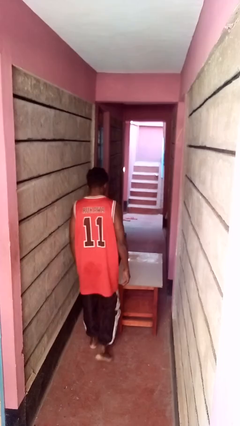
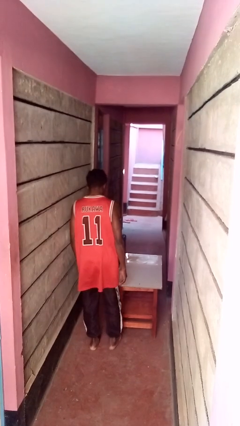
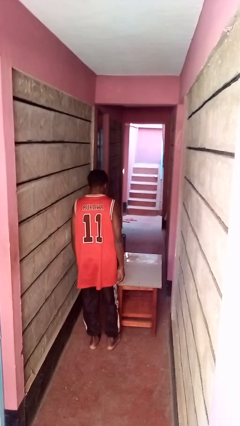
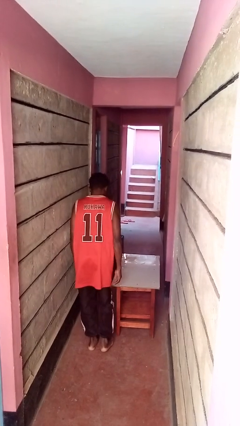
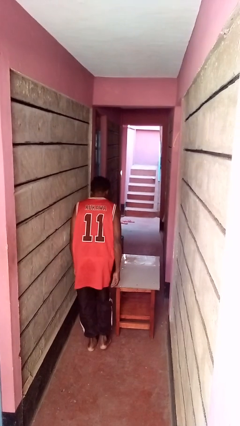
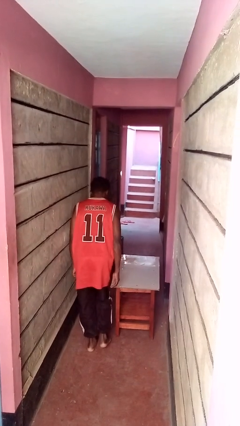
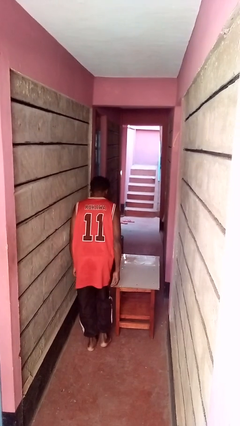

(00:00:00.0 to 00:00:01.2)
person stubs toe

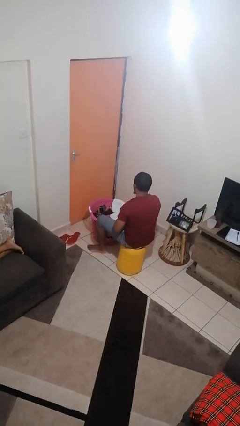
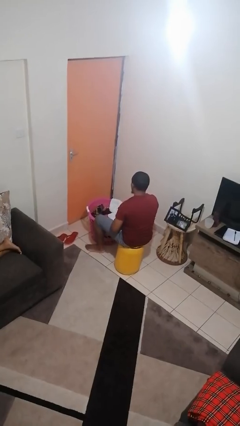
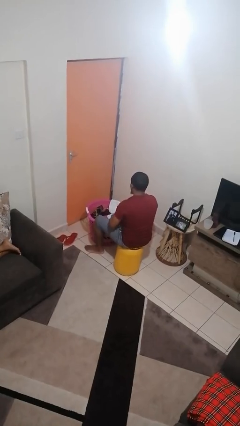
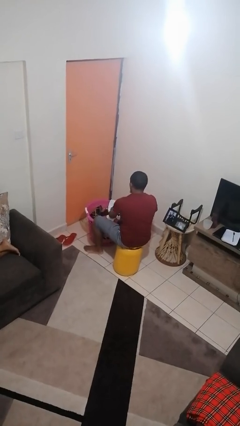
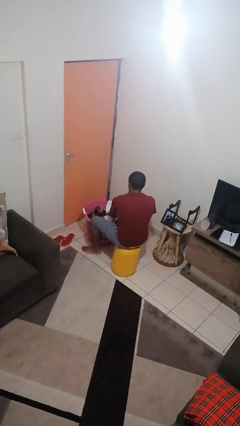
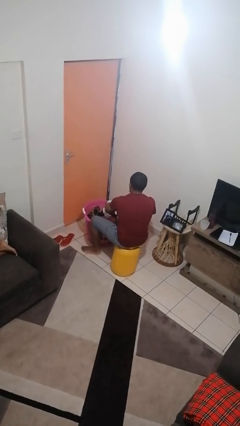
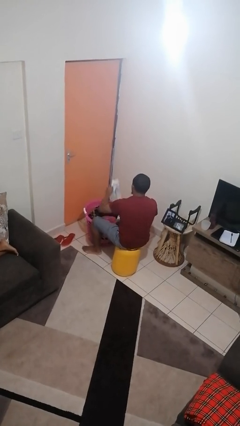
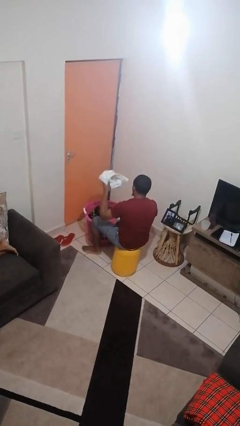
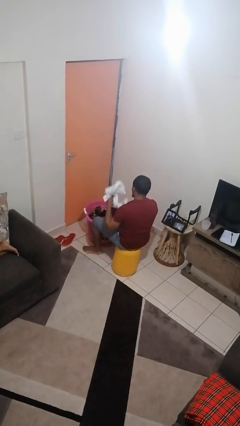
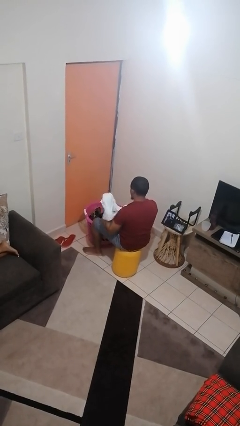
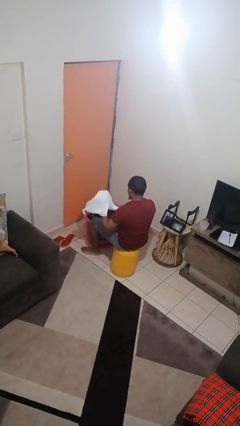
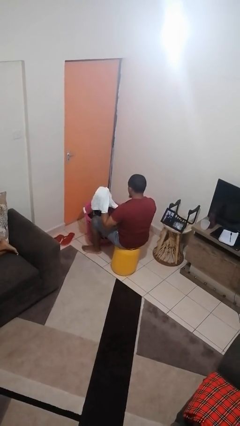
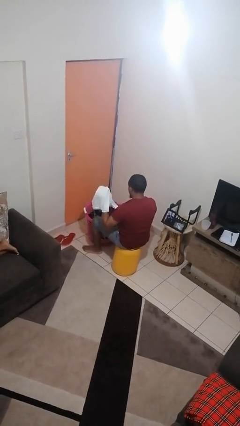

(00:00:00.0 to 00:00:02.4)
person takes object from basket

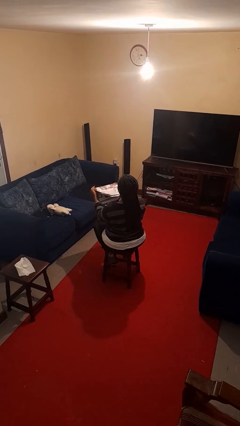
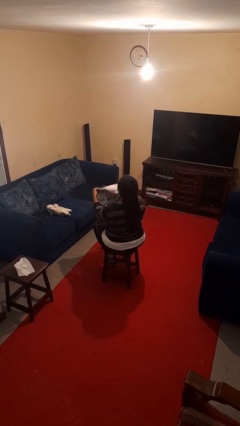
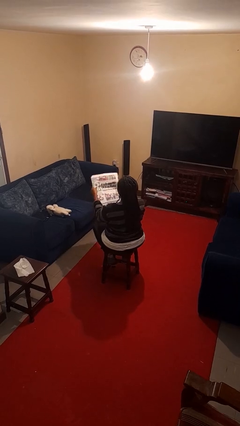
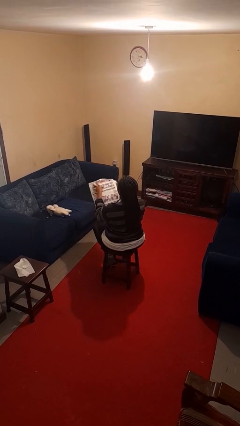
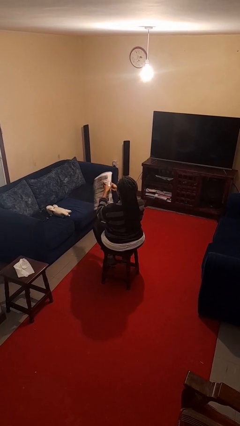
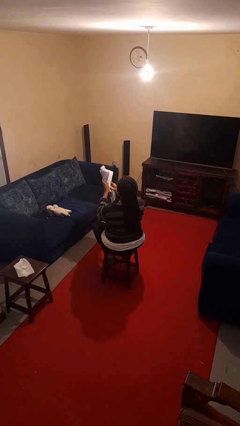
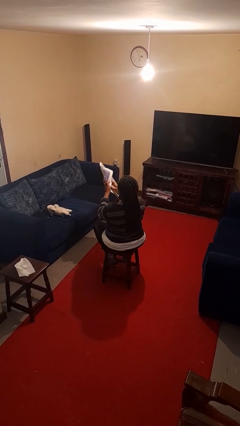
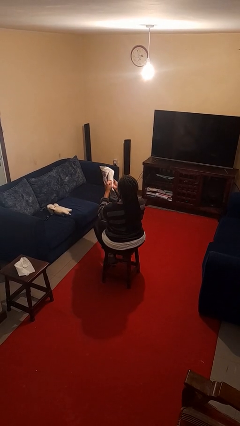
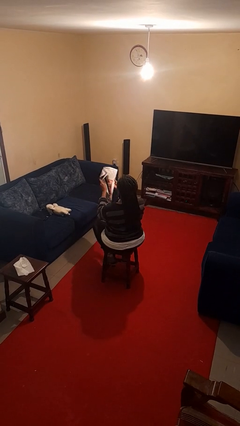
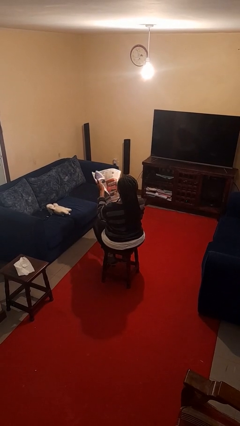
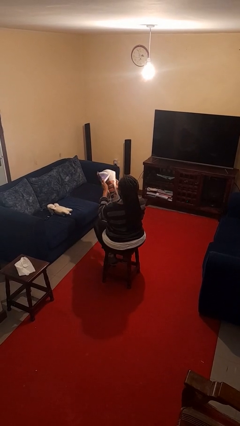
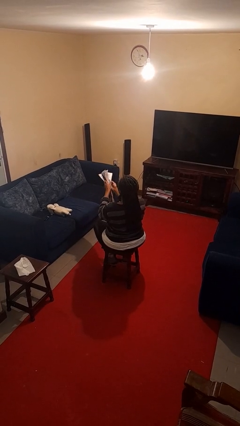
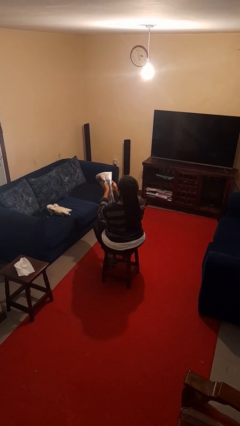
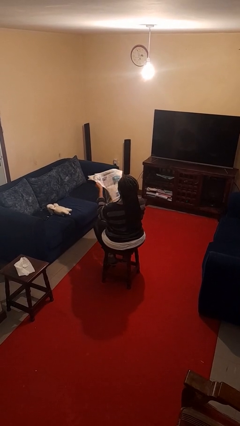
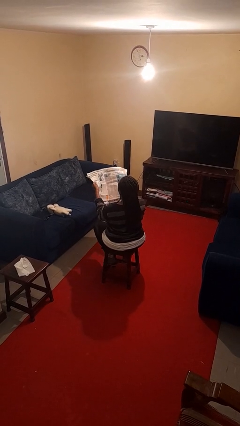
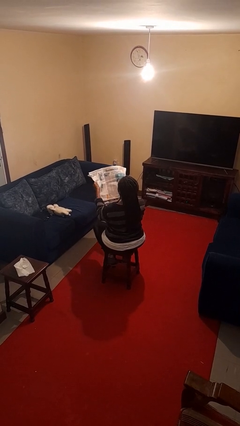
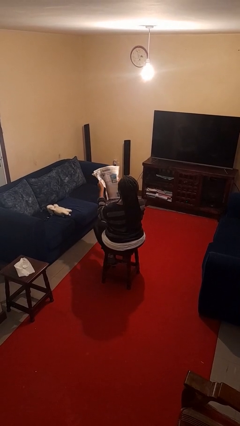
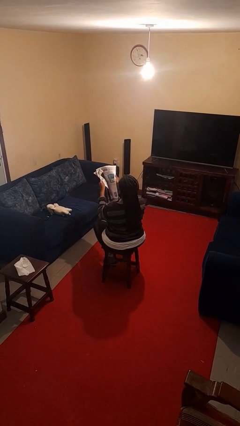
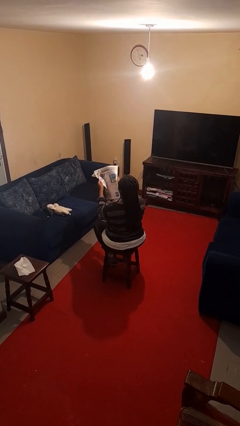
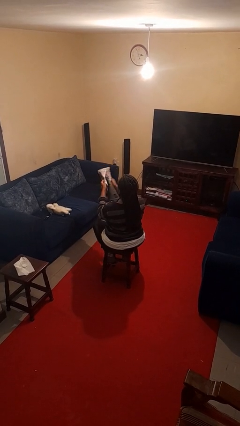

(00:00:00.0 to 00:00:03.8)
person reads newspaper

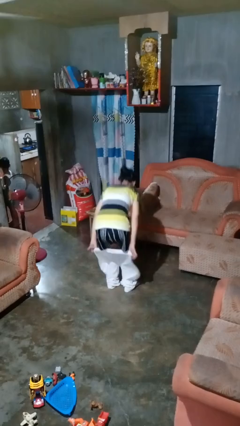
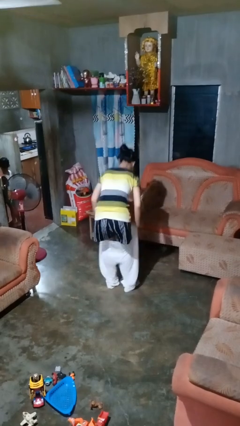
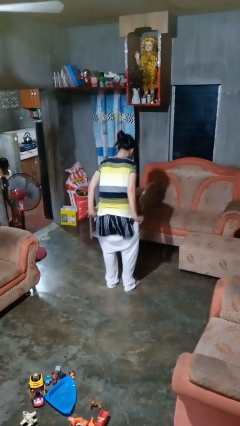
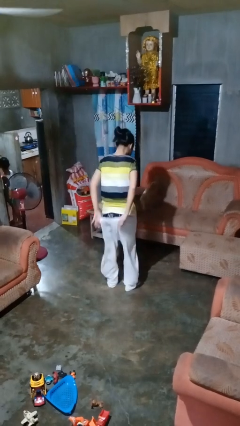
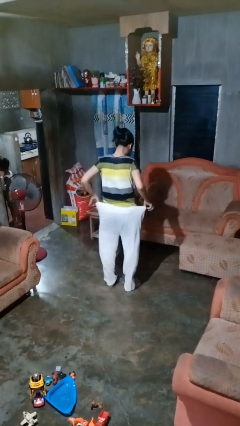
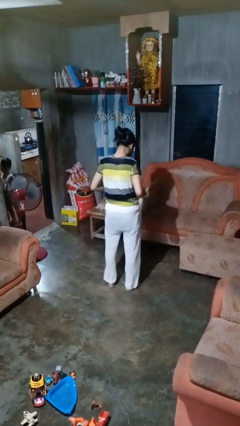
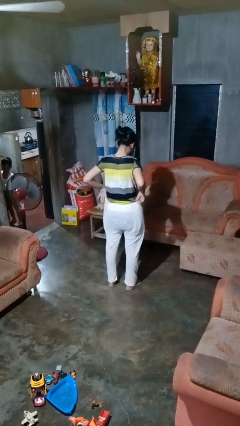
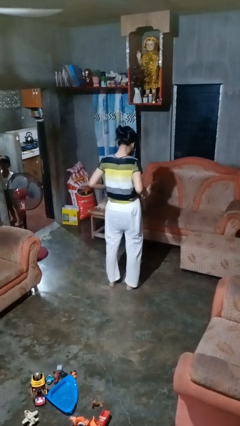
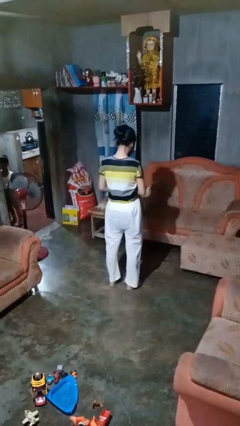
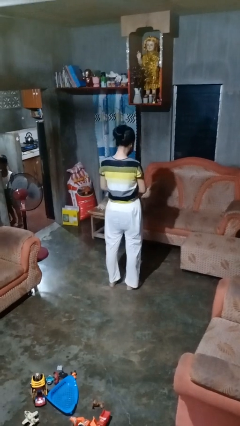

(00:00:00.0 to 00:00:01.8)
person puts on pants

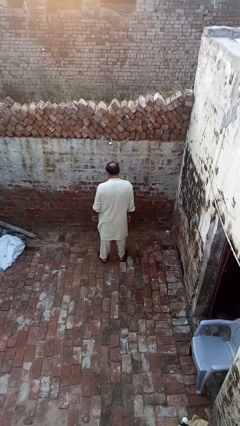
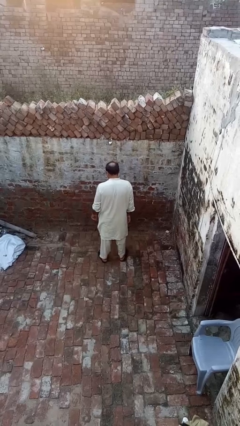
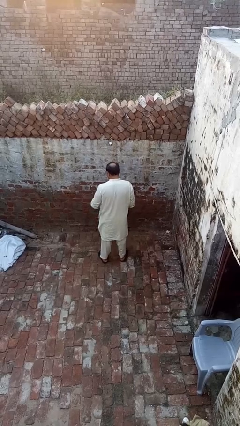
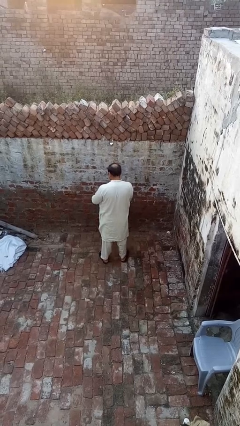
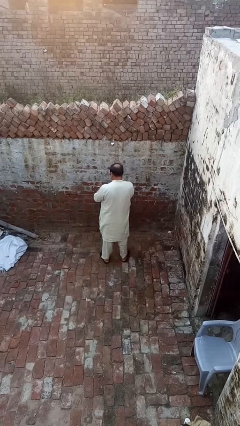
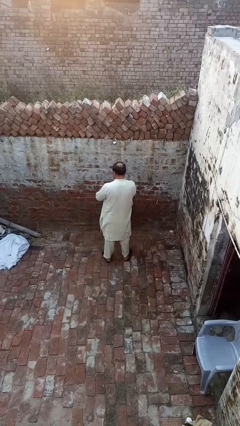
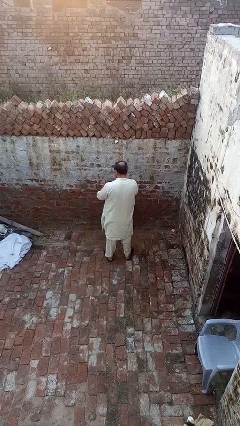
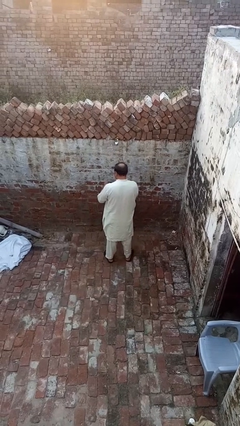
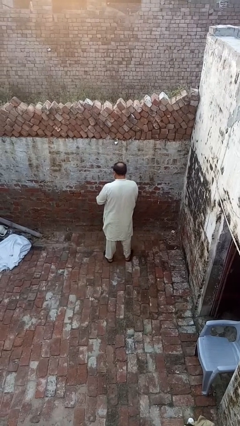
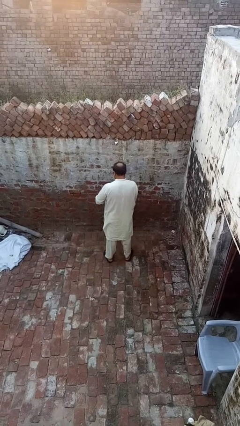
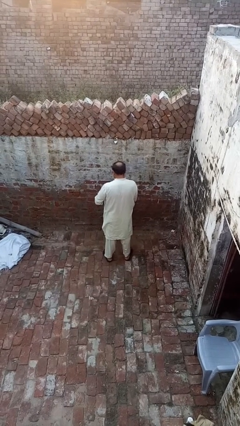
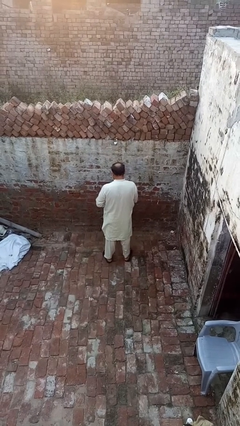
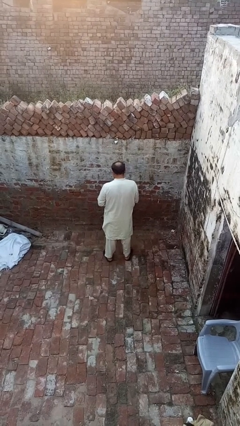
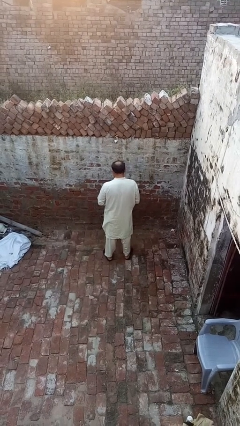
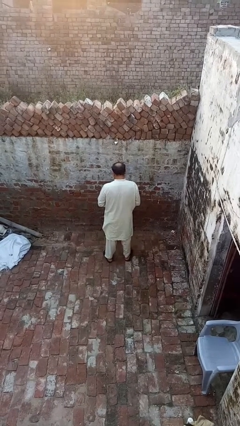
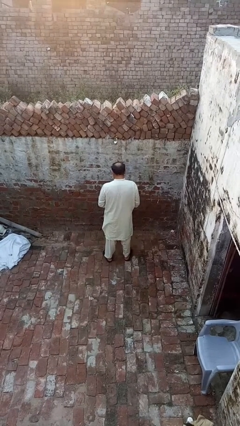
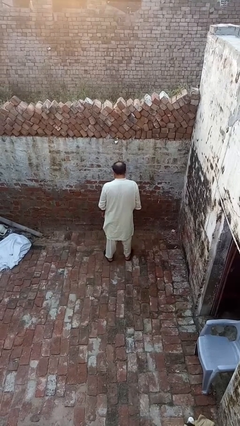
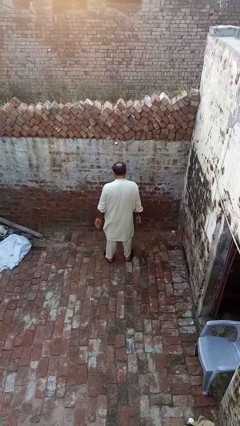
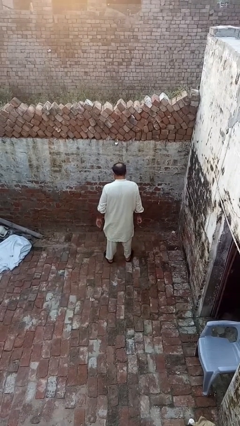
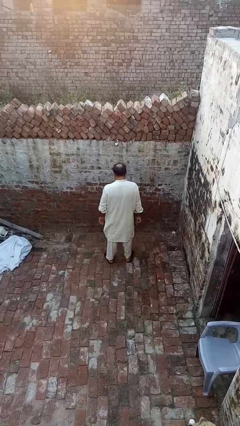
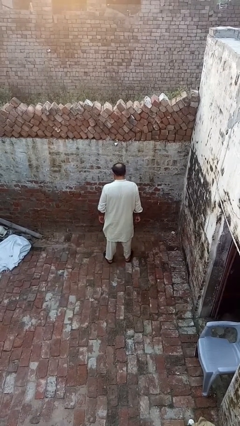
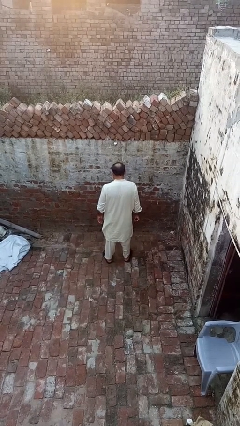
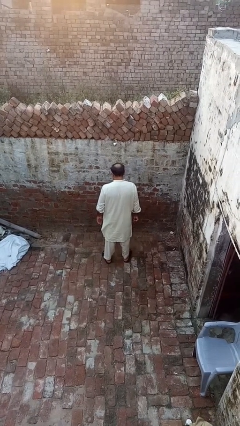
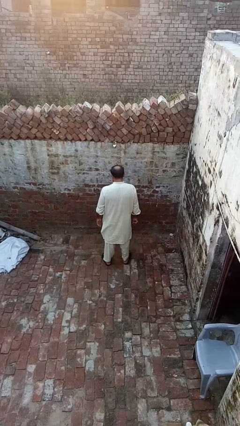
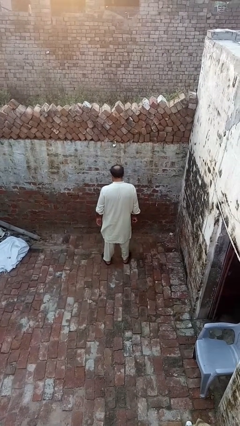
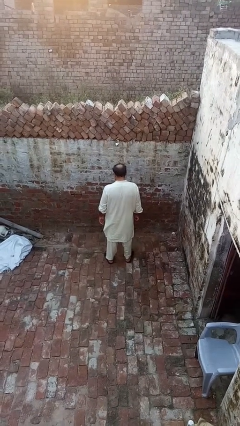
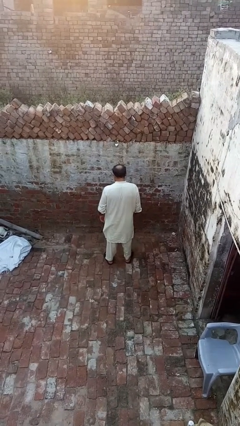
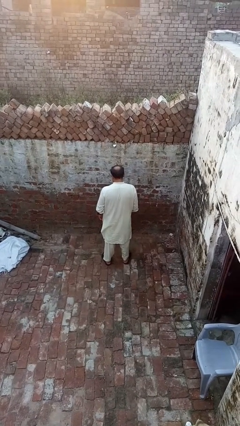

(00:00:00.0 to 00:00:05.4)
person takes off wristwatch

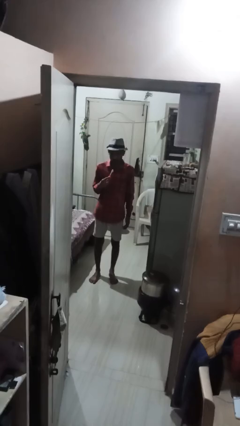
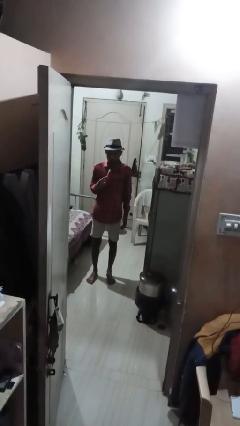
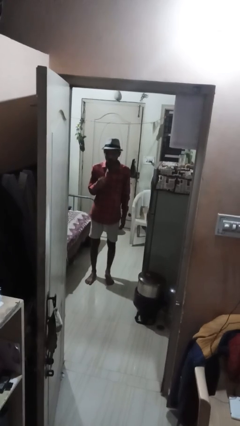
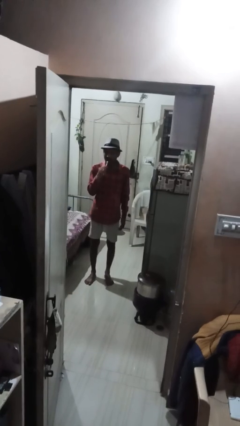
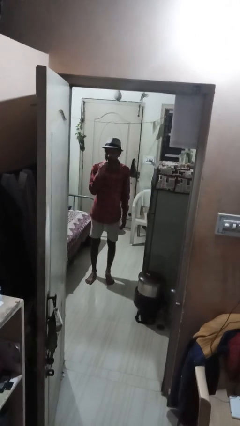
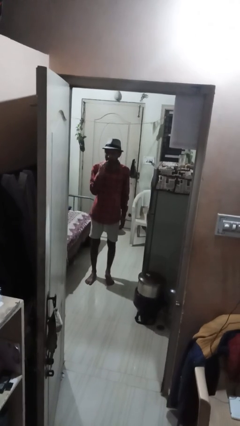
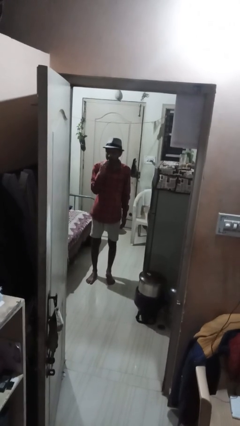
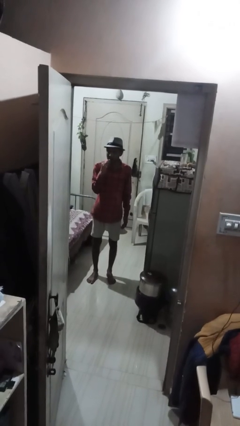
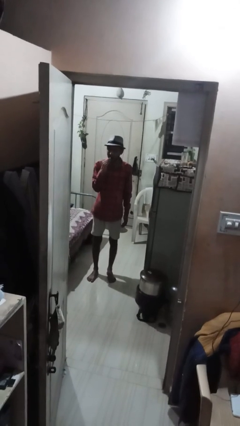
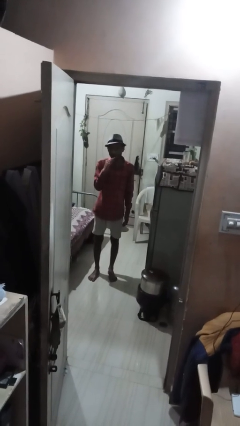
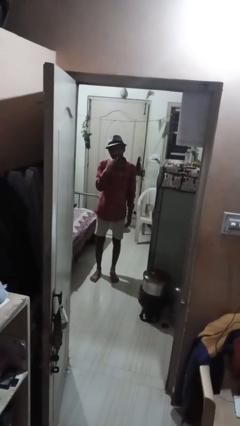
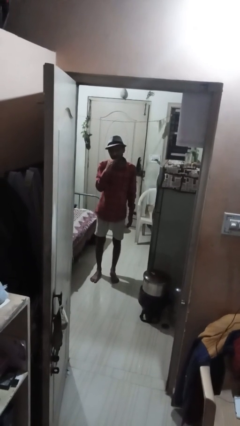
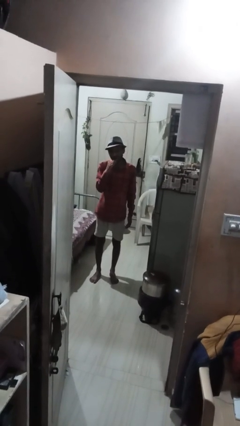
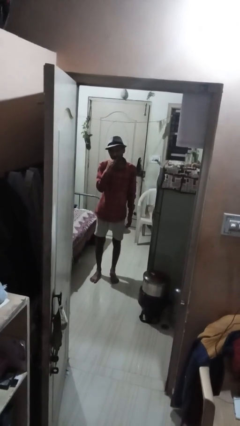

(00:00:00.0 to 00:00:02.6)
person brushes teeth

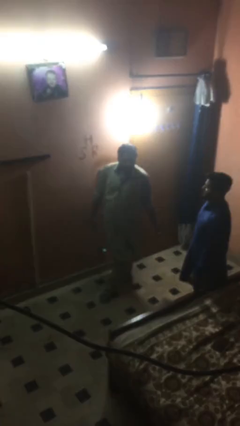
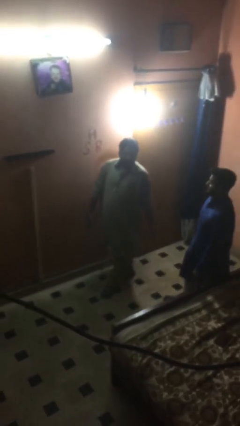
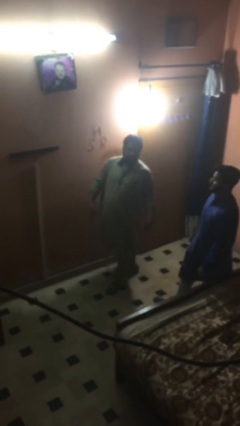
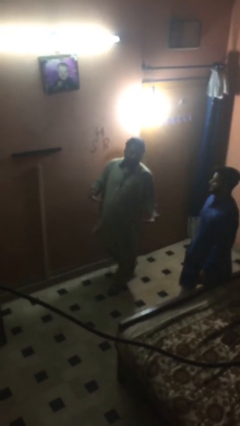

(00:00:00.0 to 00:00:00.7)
person talks to person
